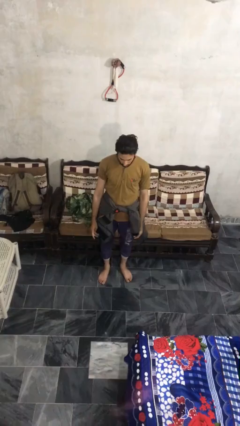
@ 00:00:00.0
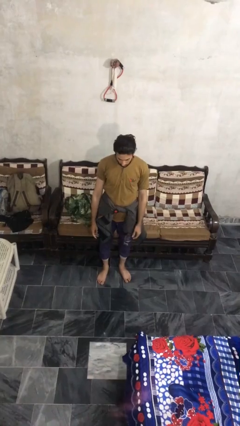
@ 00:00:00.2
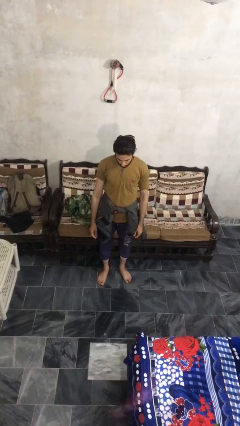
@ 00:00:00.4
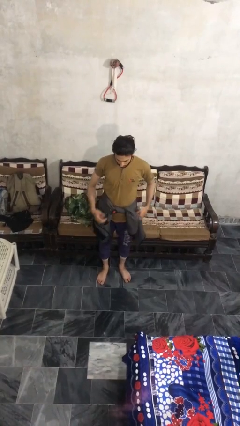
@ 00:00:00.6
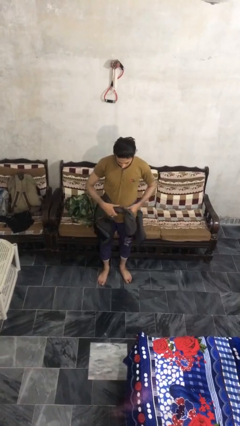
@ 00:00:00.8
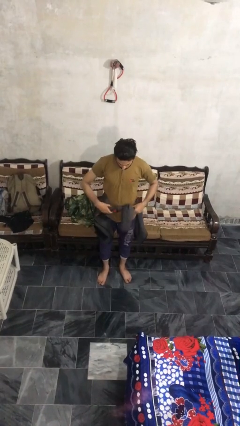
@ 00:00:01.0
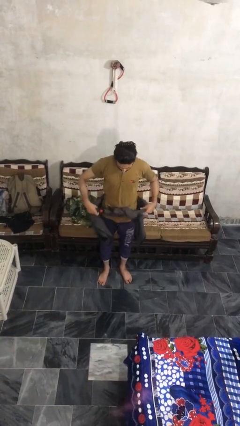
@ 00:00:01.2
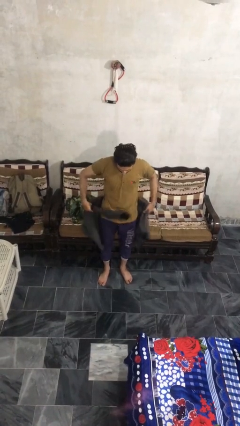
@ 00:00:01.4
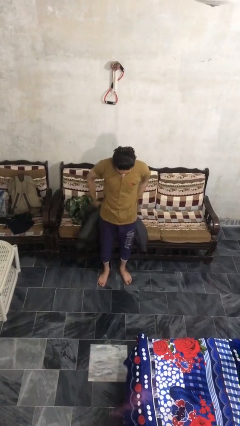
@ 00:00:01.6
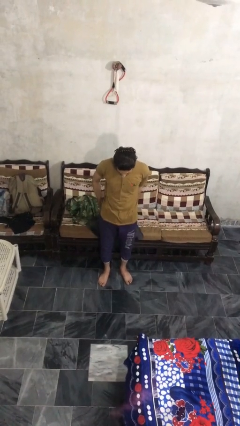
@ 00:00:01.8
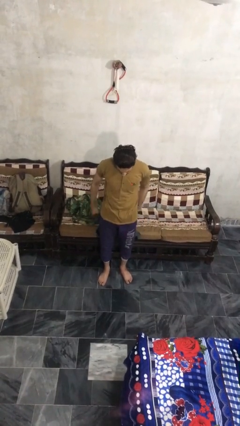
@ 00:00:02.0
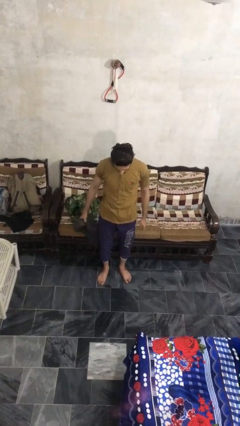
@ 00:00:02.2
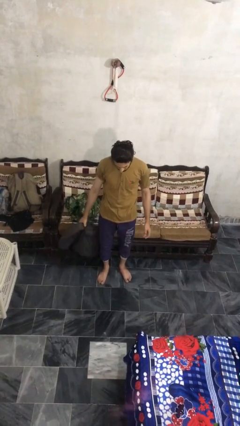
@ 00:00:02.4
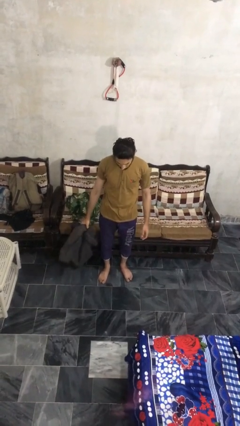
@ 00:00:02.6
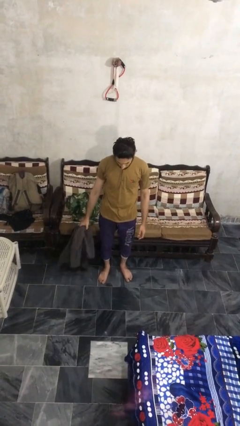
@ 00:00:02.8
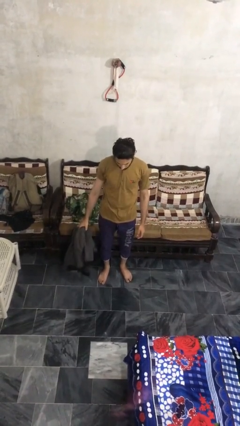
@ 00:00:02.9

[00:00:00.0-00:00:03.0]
person unties jacket around waist

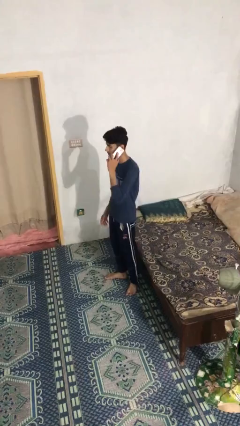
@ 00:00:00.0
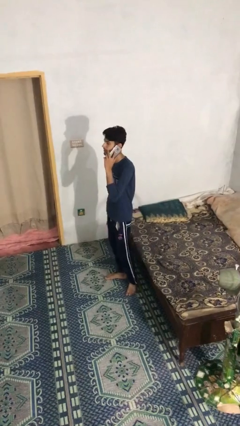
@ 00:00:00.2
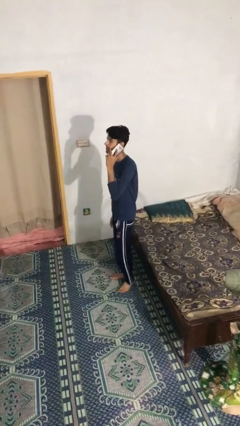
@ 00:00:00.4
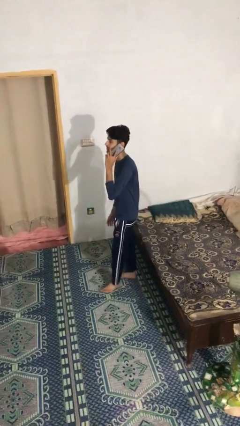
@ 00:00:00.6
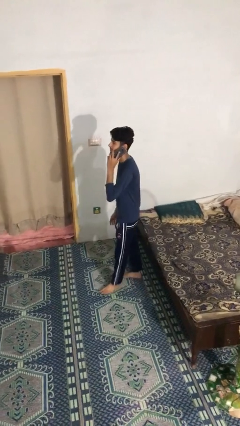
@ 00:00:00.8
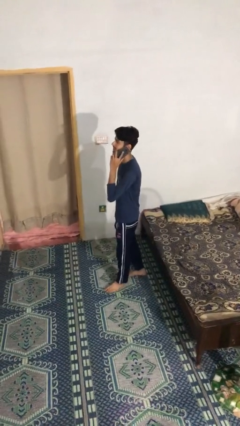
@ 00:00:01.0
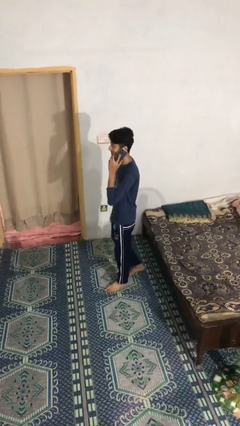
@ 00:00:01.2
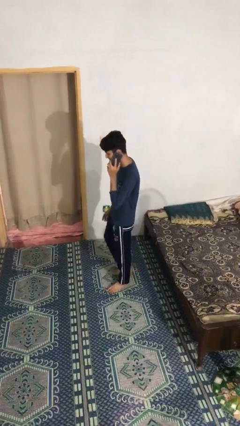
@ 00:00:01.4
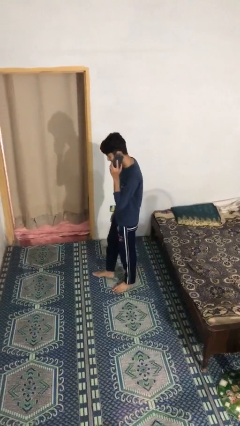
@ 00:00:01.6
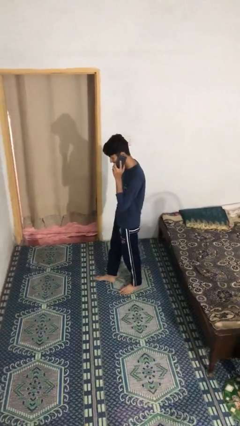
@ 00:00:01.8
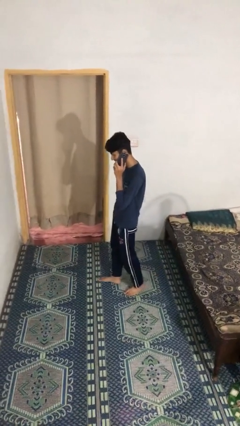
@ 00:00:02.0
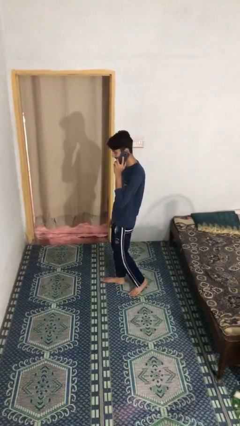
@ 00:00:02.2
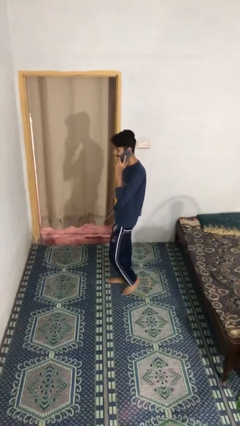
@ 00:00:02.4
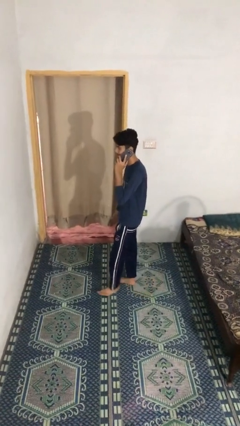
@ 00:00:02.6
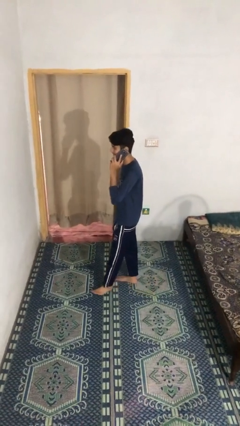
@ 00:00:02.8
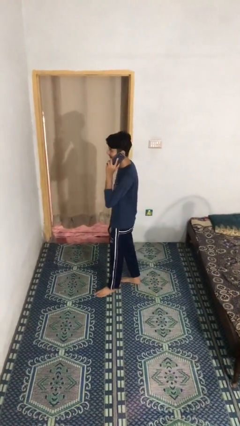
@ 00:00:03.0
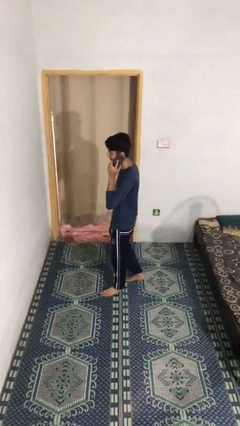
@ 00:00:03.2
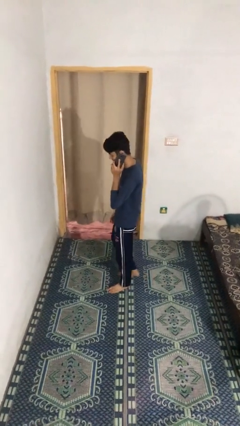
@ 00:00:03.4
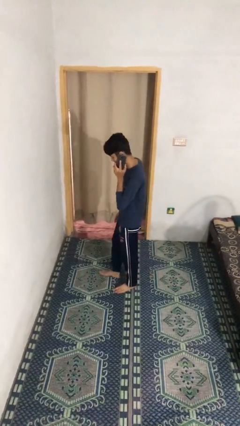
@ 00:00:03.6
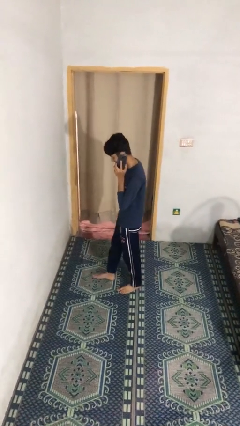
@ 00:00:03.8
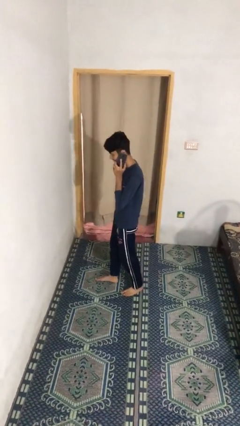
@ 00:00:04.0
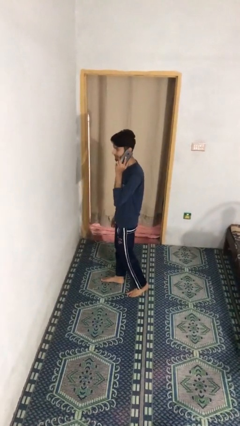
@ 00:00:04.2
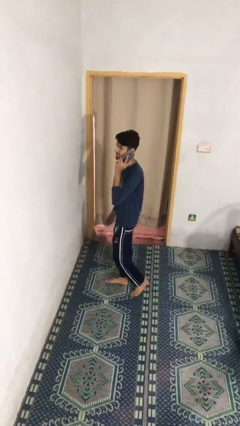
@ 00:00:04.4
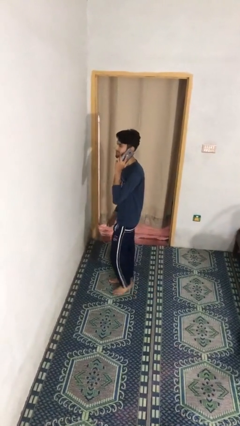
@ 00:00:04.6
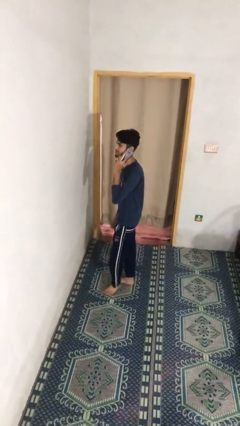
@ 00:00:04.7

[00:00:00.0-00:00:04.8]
person talks on phone

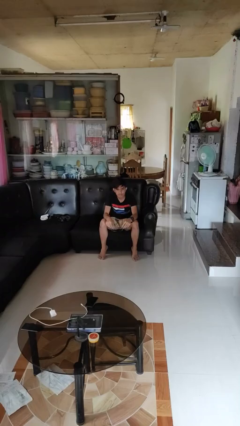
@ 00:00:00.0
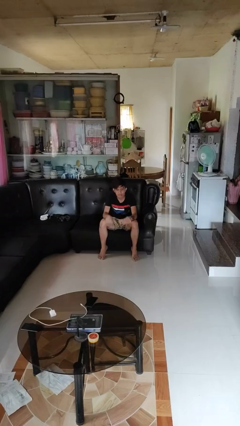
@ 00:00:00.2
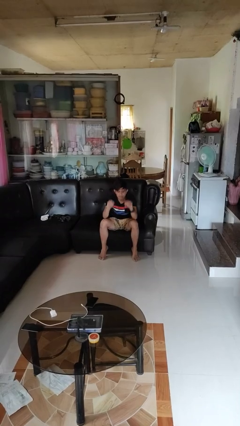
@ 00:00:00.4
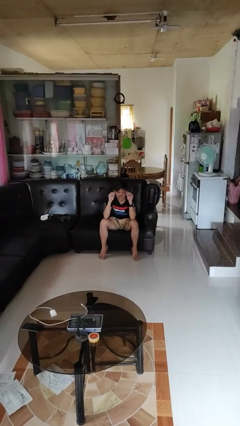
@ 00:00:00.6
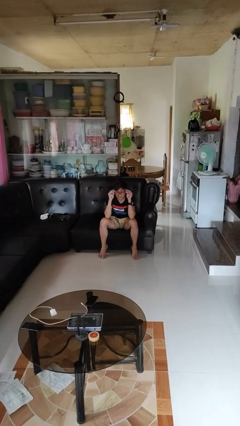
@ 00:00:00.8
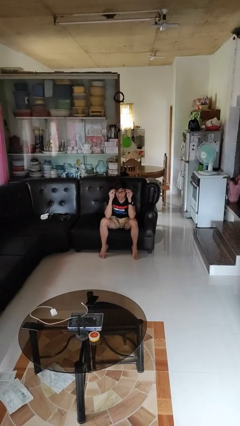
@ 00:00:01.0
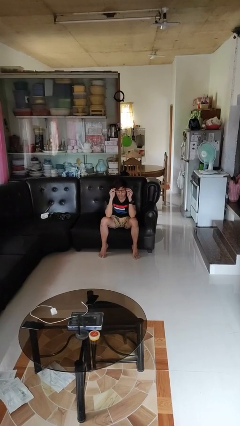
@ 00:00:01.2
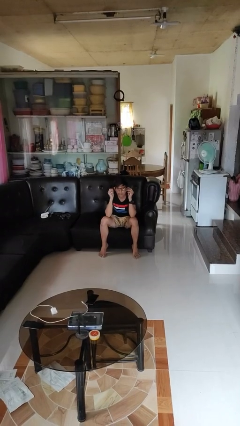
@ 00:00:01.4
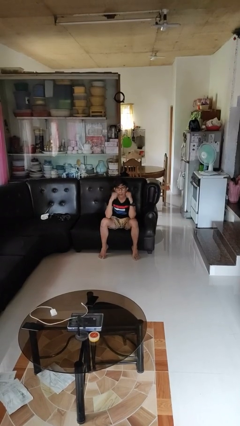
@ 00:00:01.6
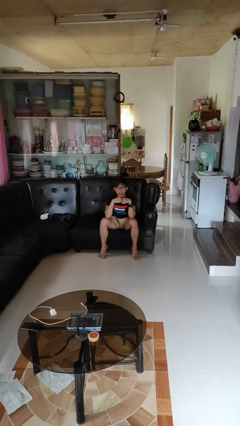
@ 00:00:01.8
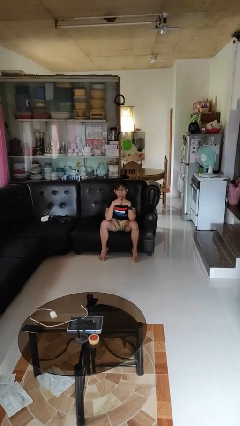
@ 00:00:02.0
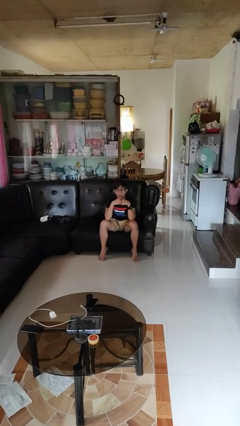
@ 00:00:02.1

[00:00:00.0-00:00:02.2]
person puts on glasses

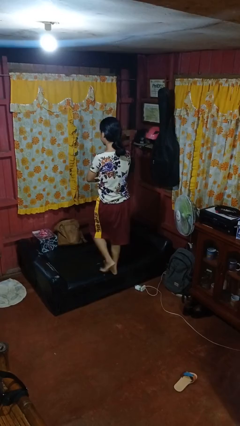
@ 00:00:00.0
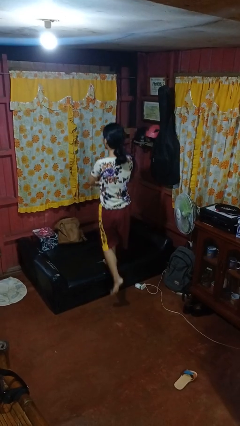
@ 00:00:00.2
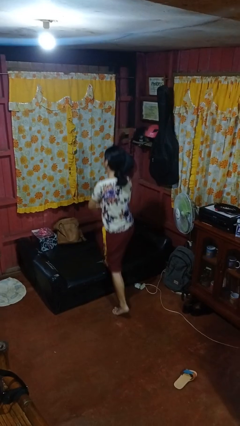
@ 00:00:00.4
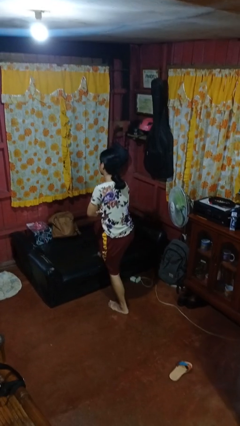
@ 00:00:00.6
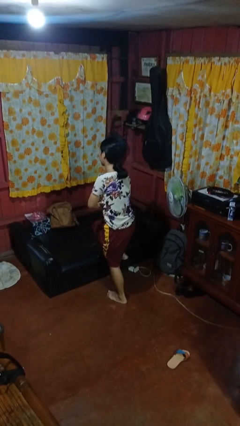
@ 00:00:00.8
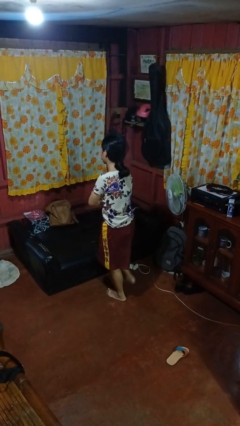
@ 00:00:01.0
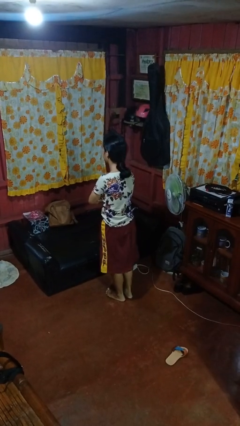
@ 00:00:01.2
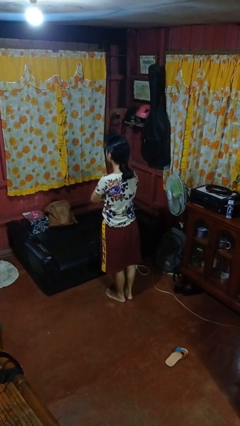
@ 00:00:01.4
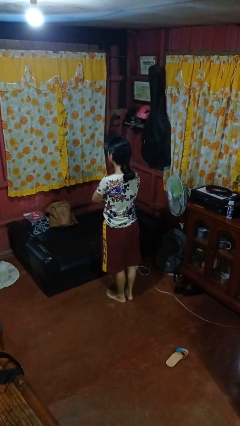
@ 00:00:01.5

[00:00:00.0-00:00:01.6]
person climbs off couch

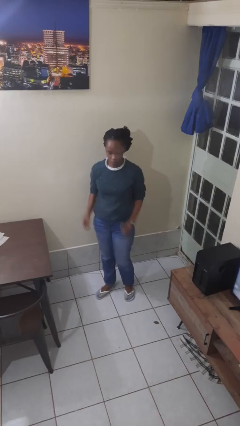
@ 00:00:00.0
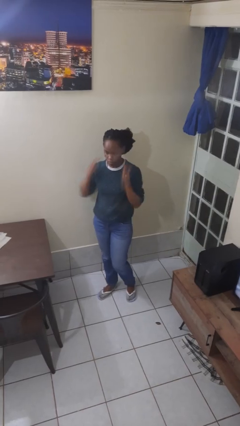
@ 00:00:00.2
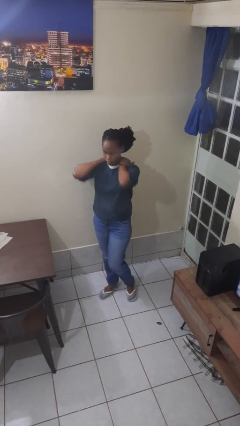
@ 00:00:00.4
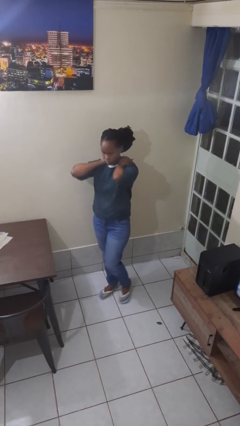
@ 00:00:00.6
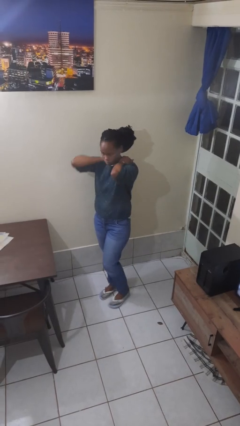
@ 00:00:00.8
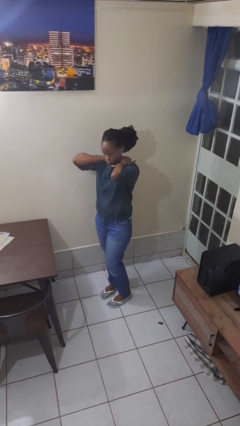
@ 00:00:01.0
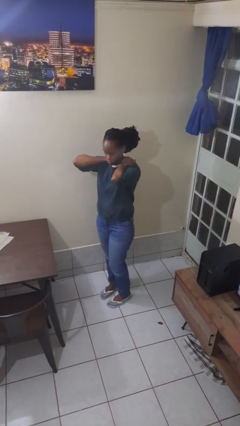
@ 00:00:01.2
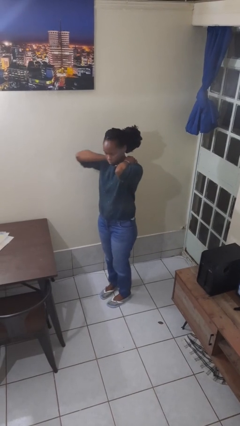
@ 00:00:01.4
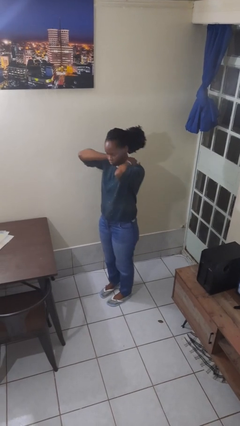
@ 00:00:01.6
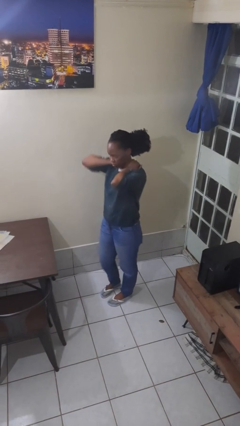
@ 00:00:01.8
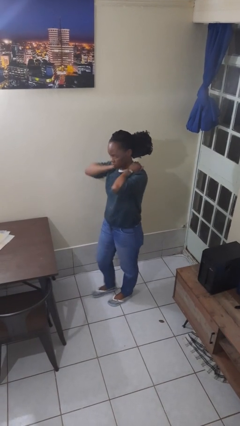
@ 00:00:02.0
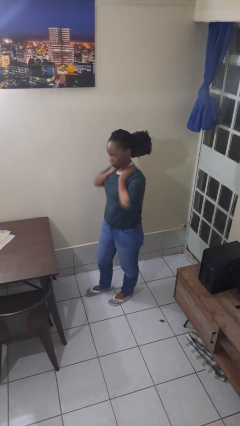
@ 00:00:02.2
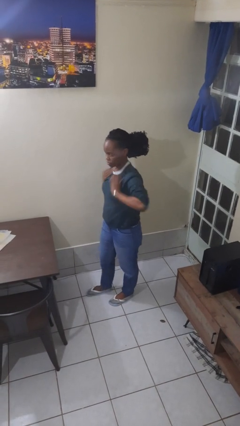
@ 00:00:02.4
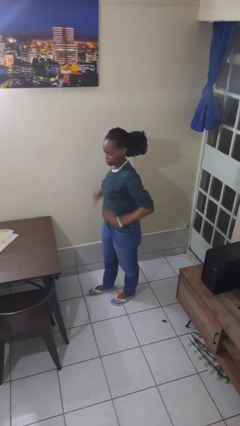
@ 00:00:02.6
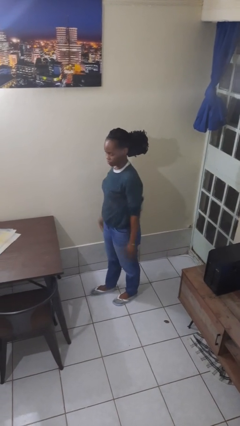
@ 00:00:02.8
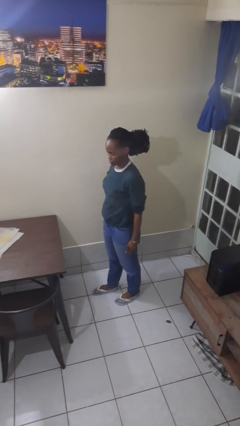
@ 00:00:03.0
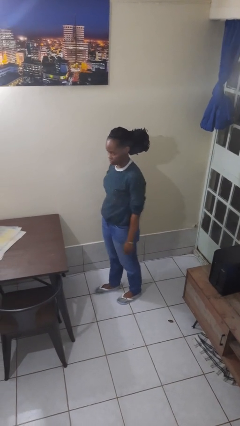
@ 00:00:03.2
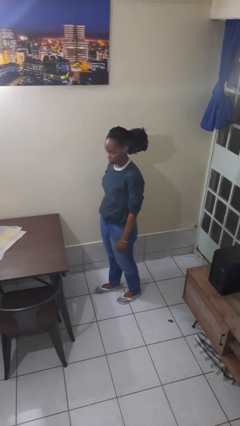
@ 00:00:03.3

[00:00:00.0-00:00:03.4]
person rubs neck

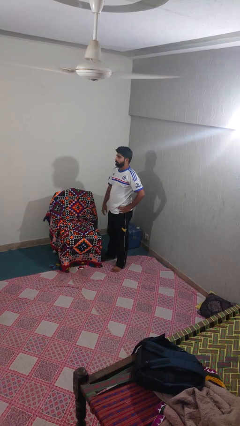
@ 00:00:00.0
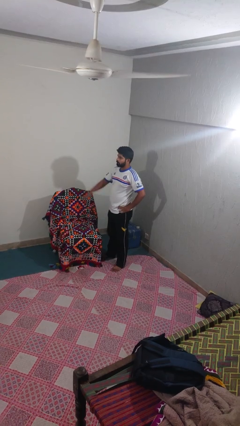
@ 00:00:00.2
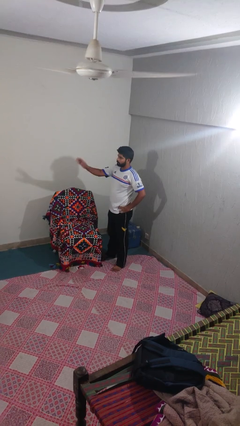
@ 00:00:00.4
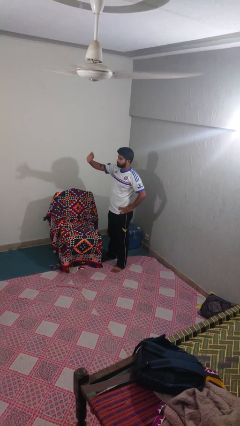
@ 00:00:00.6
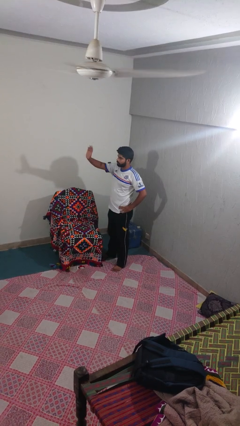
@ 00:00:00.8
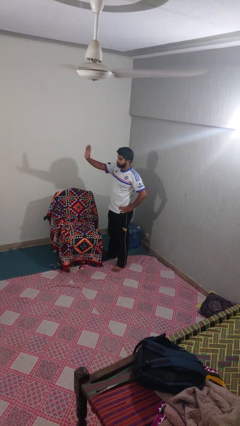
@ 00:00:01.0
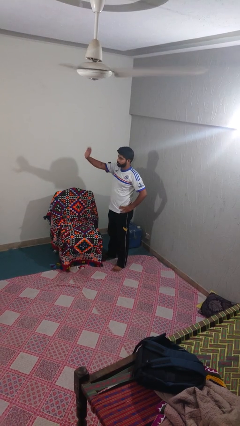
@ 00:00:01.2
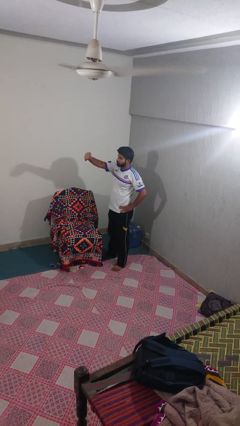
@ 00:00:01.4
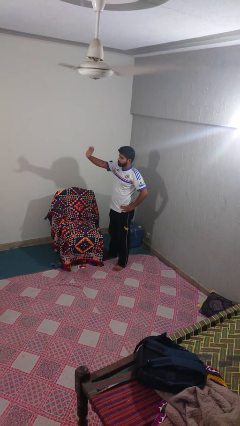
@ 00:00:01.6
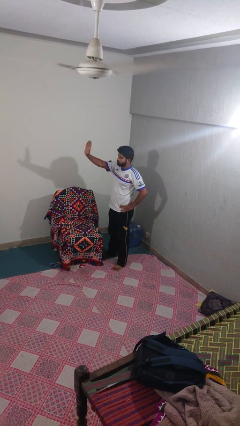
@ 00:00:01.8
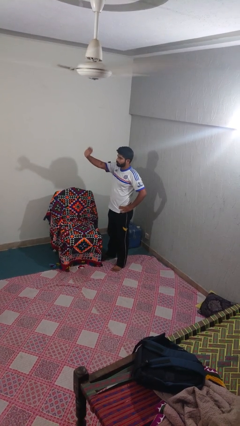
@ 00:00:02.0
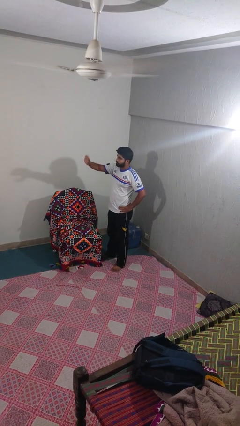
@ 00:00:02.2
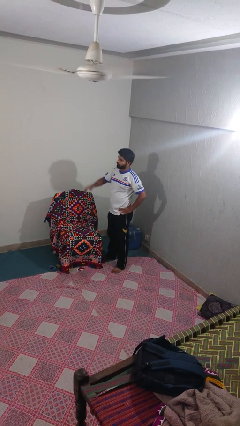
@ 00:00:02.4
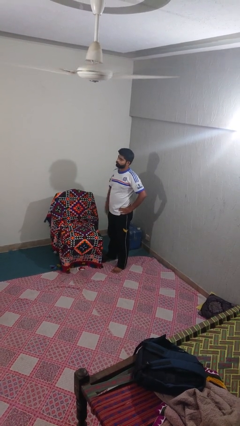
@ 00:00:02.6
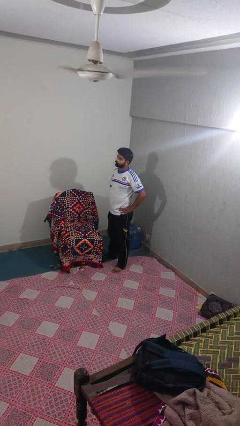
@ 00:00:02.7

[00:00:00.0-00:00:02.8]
person waves at person
